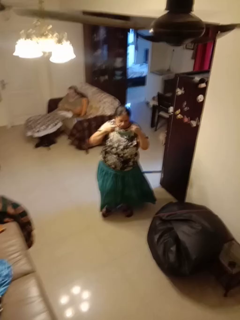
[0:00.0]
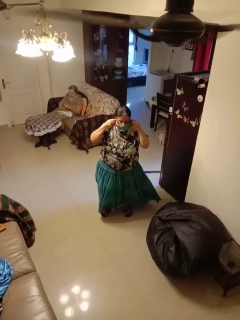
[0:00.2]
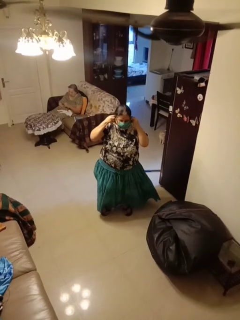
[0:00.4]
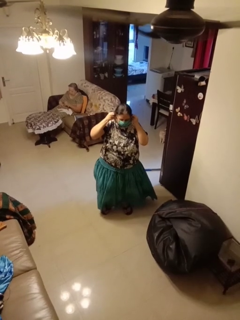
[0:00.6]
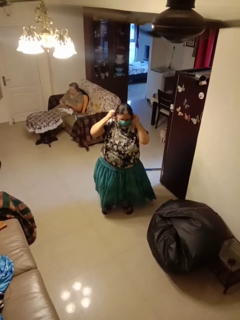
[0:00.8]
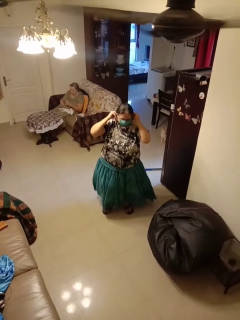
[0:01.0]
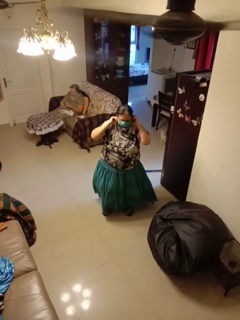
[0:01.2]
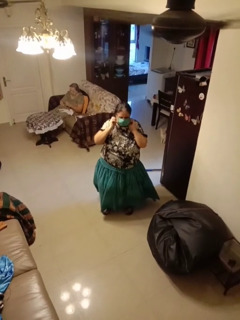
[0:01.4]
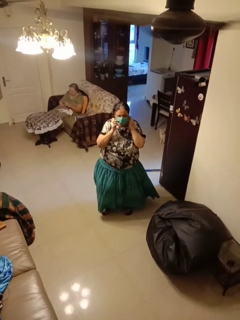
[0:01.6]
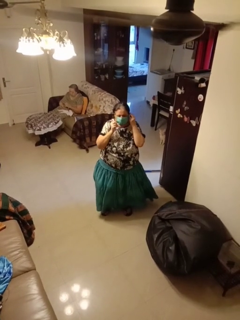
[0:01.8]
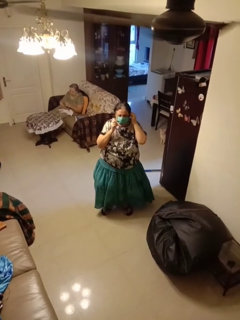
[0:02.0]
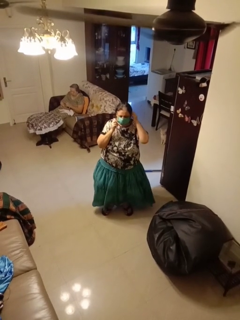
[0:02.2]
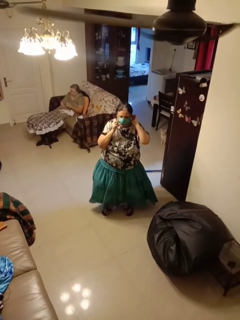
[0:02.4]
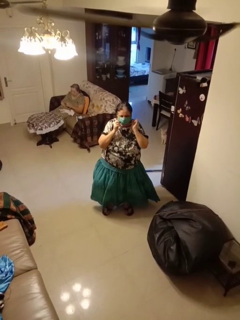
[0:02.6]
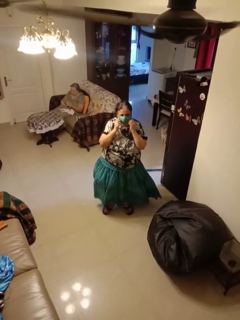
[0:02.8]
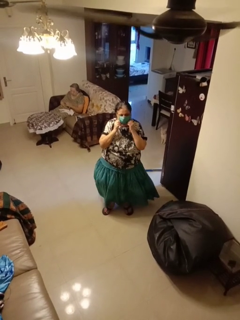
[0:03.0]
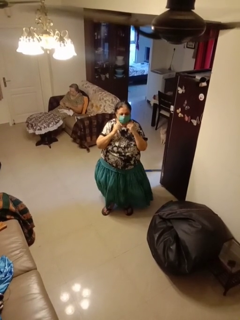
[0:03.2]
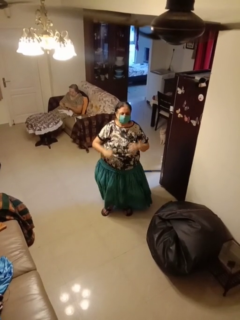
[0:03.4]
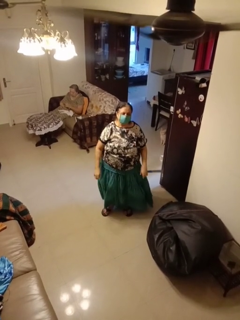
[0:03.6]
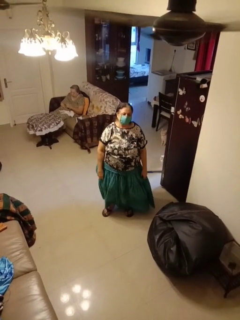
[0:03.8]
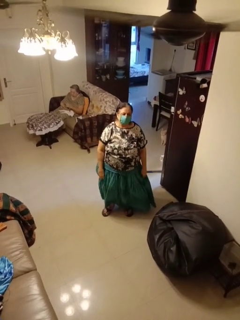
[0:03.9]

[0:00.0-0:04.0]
person puts on facemask

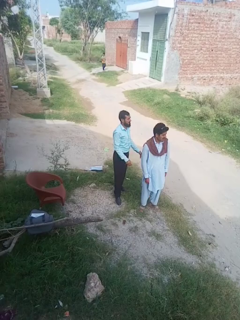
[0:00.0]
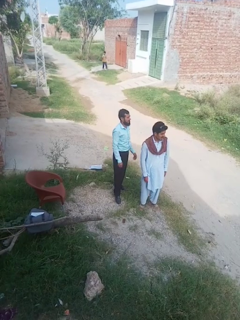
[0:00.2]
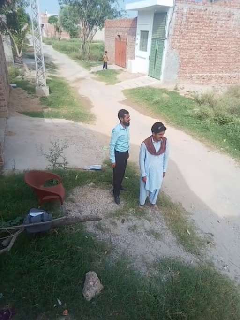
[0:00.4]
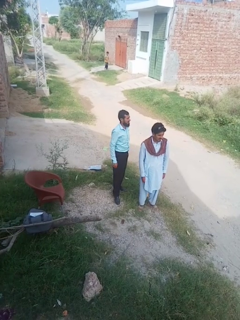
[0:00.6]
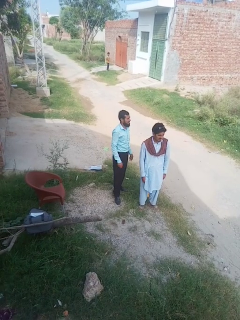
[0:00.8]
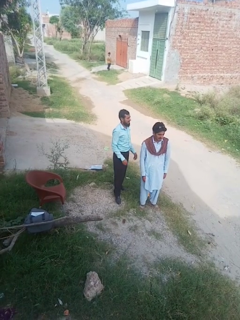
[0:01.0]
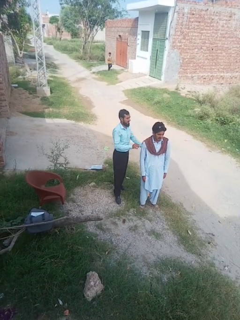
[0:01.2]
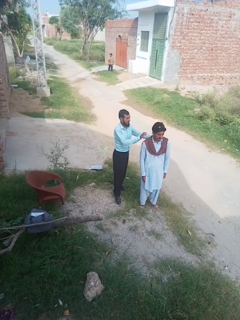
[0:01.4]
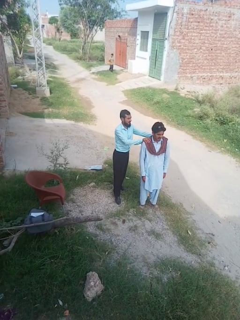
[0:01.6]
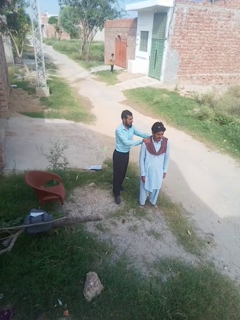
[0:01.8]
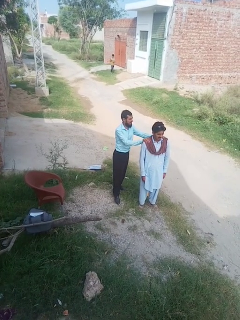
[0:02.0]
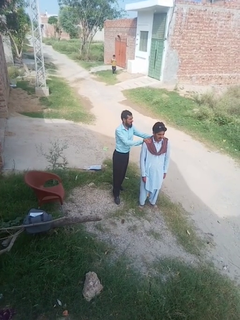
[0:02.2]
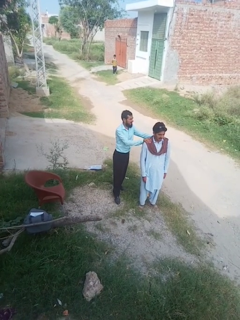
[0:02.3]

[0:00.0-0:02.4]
person grabs person by shoulder

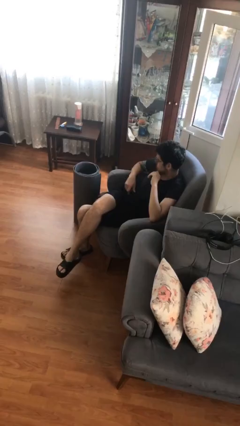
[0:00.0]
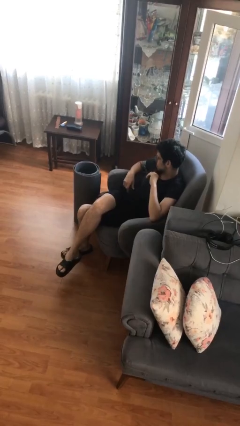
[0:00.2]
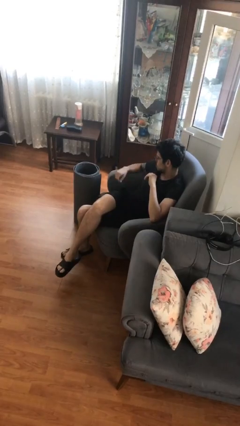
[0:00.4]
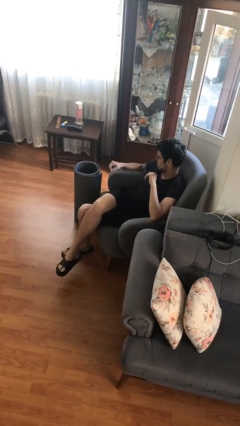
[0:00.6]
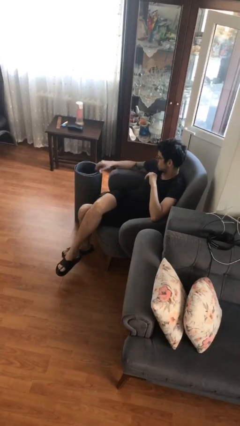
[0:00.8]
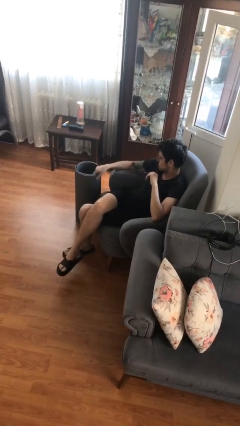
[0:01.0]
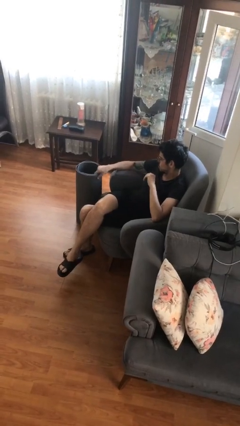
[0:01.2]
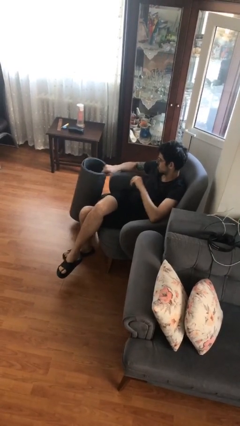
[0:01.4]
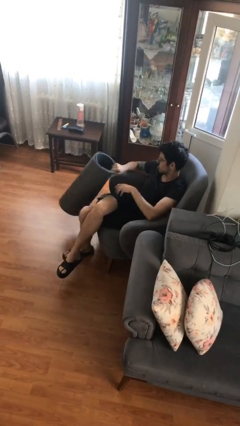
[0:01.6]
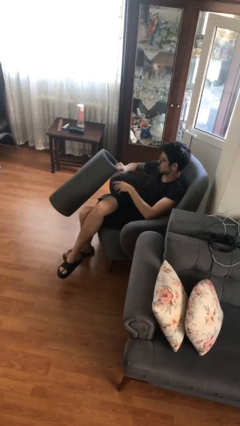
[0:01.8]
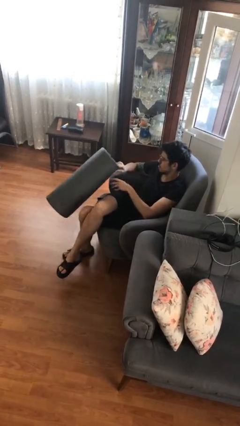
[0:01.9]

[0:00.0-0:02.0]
person picks up object from floor

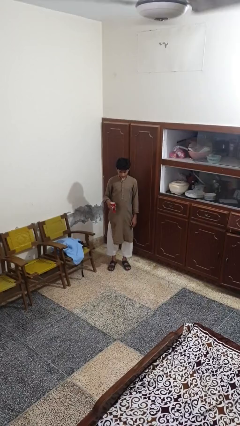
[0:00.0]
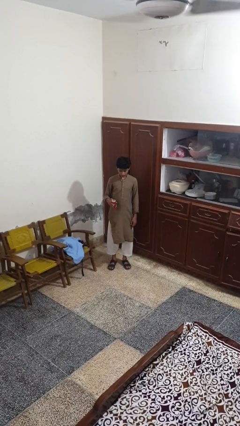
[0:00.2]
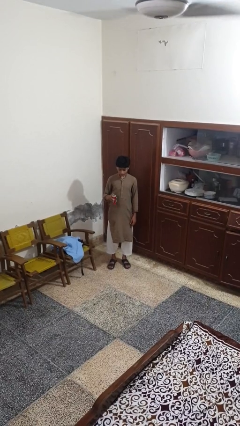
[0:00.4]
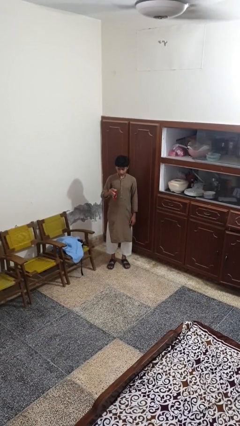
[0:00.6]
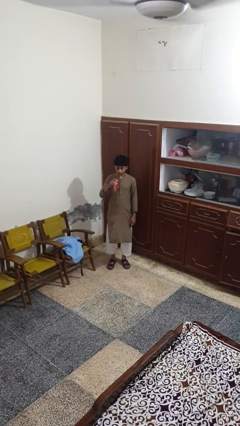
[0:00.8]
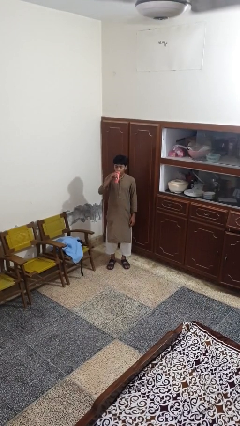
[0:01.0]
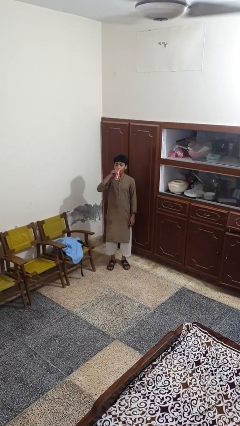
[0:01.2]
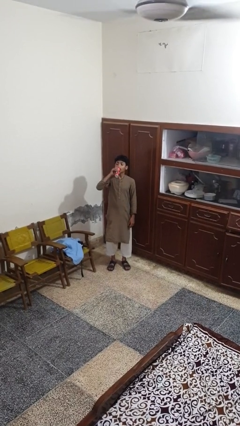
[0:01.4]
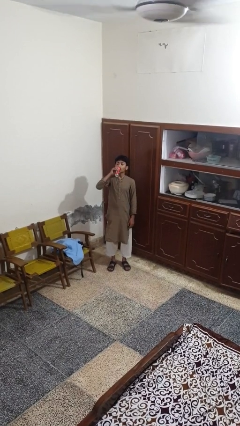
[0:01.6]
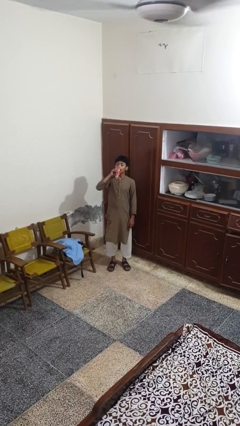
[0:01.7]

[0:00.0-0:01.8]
person drinks from beverage can

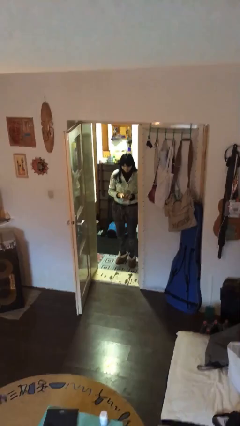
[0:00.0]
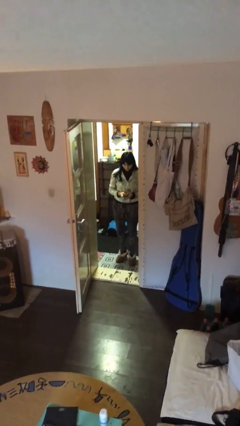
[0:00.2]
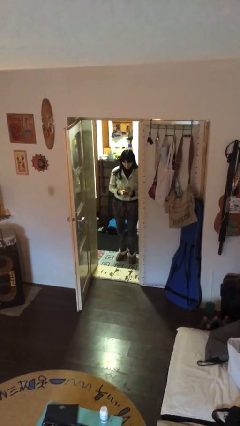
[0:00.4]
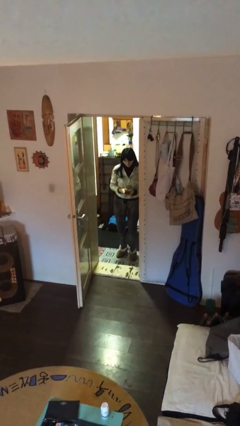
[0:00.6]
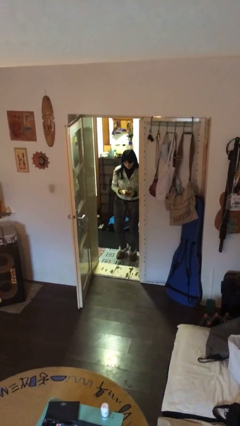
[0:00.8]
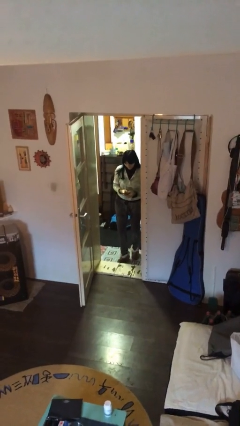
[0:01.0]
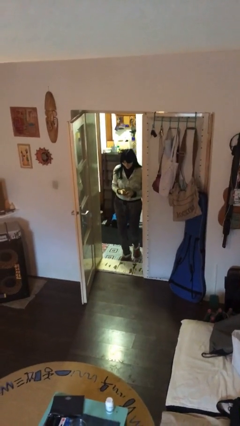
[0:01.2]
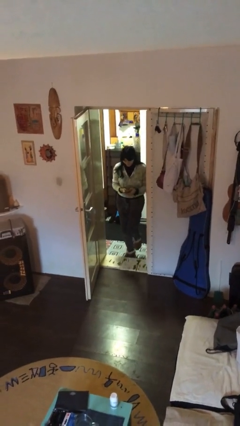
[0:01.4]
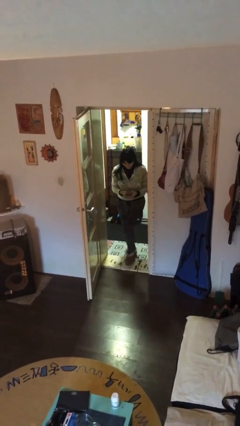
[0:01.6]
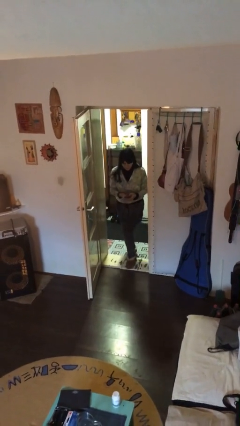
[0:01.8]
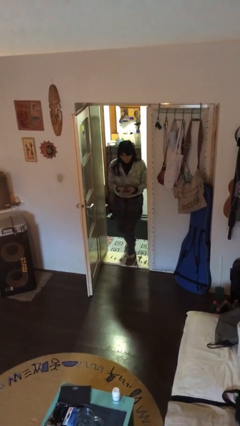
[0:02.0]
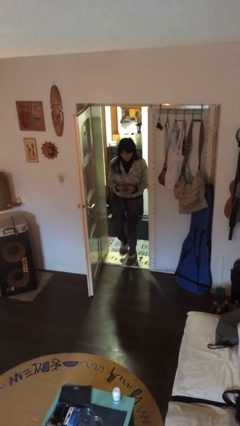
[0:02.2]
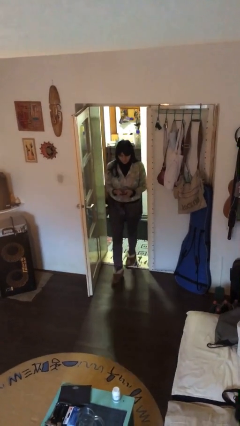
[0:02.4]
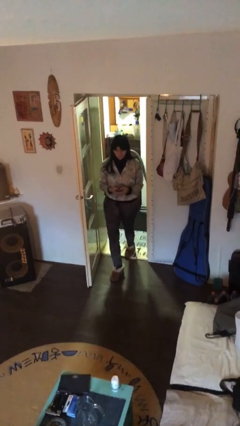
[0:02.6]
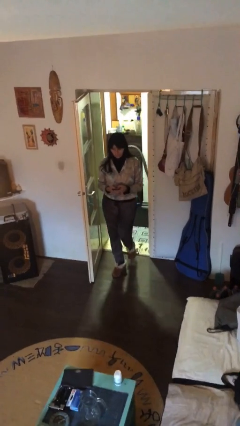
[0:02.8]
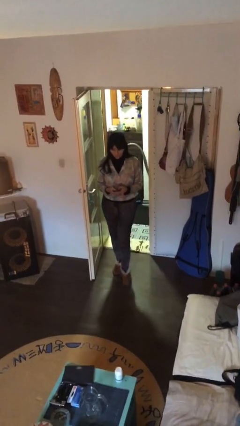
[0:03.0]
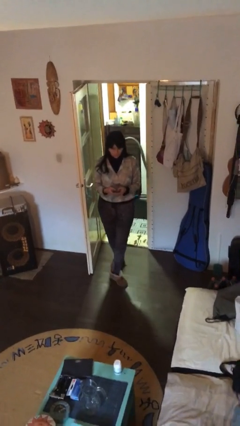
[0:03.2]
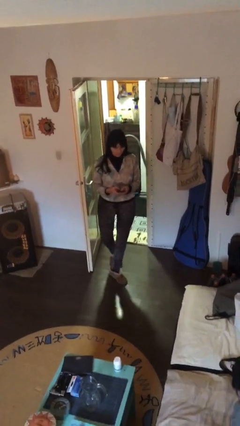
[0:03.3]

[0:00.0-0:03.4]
person enters scene through structure

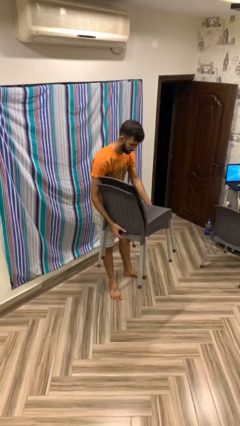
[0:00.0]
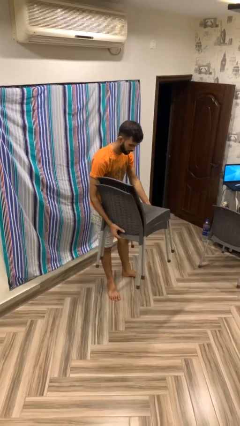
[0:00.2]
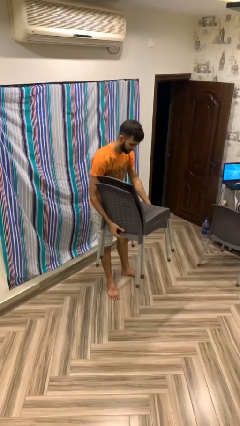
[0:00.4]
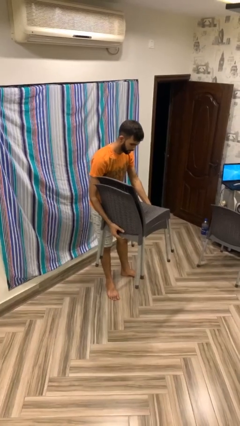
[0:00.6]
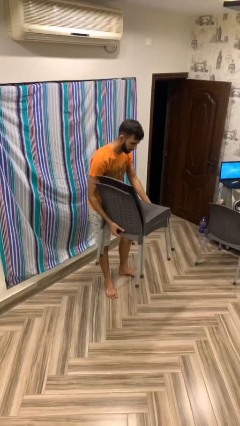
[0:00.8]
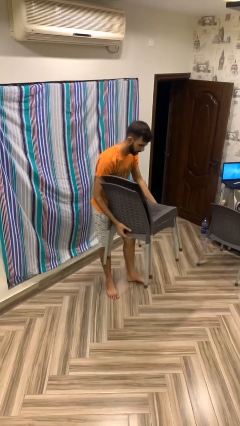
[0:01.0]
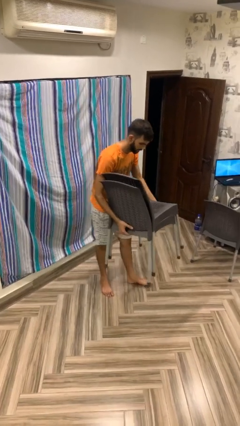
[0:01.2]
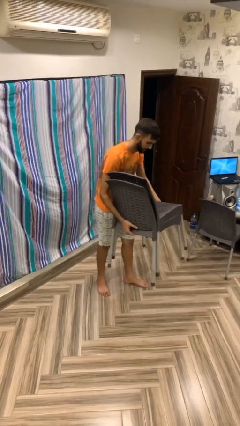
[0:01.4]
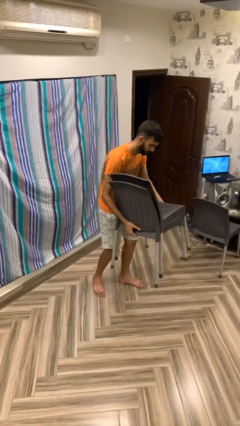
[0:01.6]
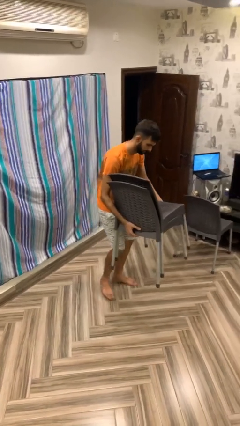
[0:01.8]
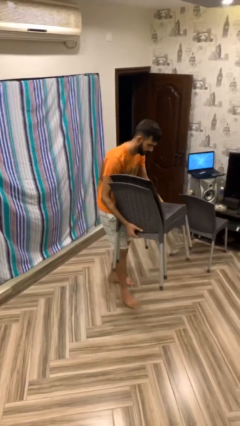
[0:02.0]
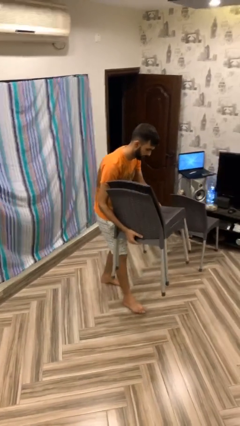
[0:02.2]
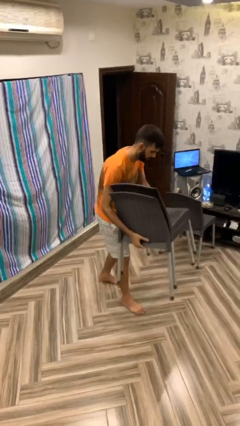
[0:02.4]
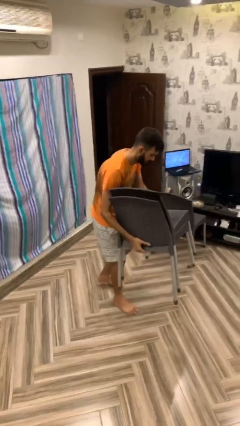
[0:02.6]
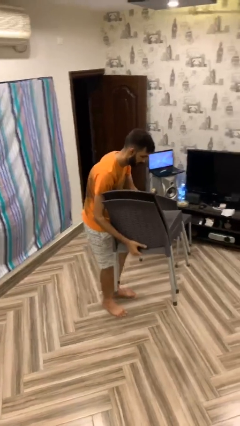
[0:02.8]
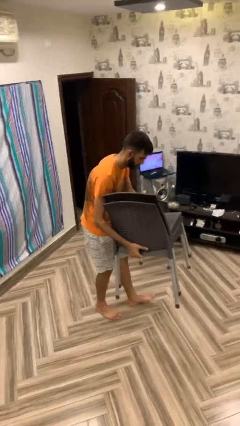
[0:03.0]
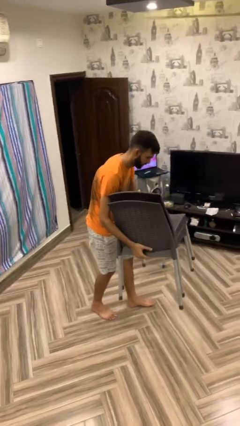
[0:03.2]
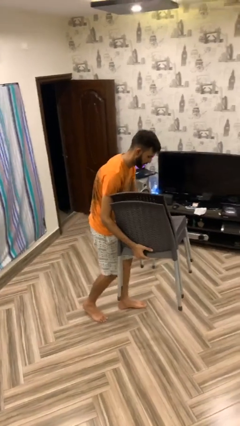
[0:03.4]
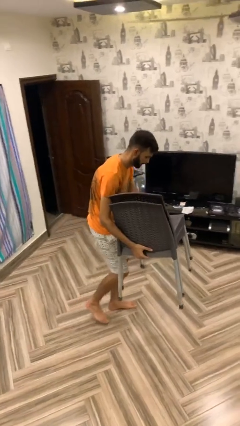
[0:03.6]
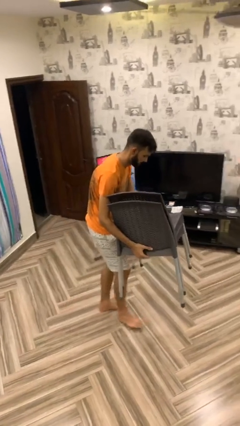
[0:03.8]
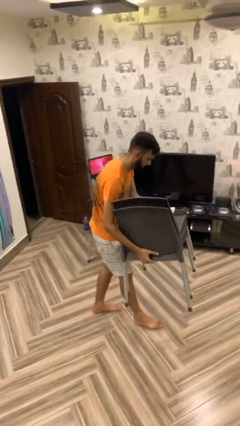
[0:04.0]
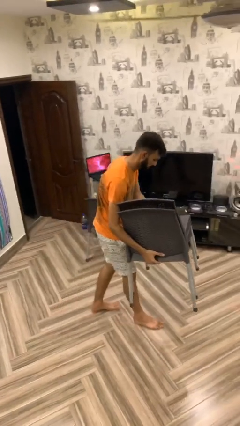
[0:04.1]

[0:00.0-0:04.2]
person carries heavy object

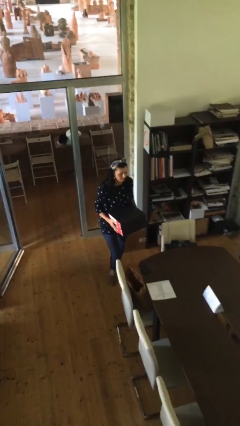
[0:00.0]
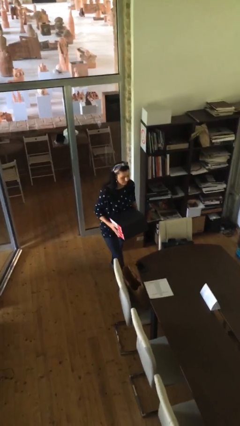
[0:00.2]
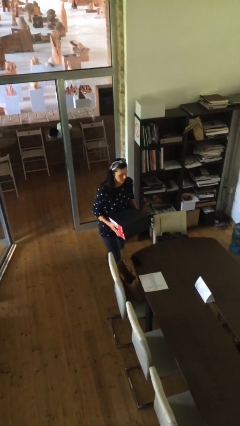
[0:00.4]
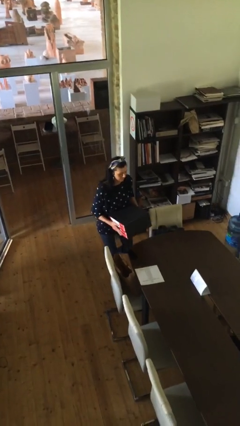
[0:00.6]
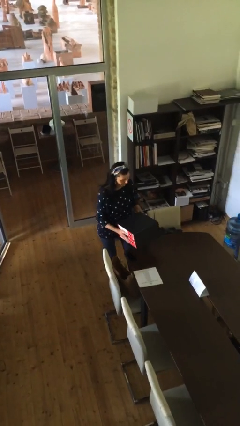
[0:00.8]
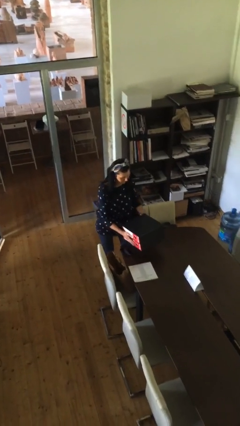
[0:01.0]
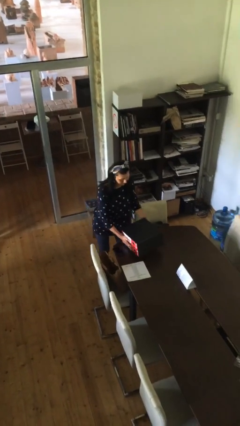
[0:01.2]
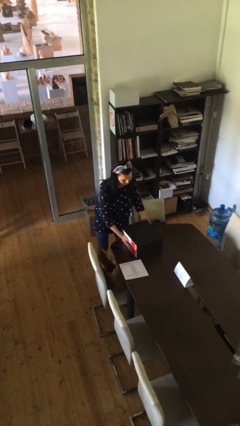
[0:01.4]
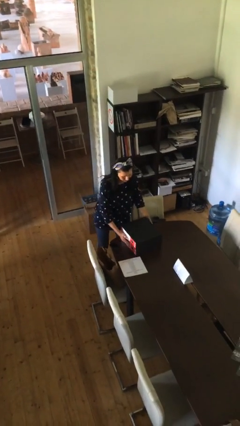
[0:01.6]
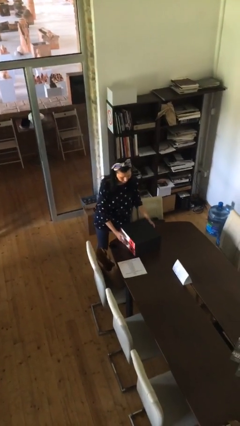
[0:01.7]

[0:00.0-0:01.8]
person puts down object on table
